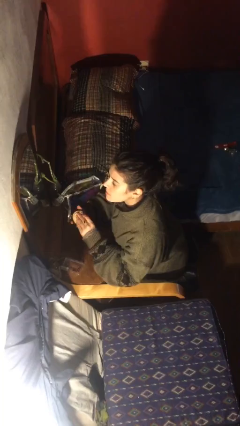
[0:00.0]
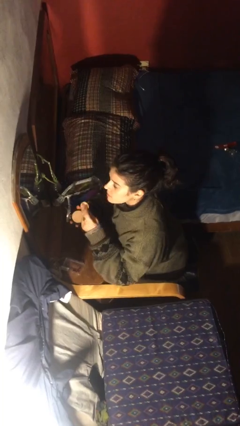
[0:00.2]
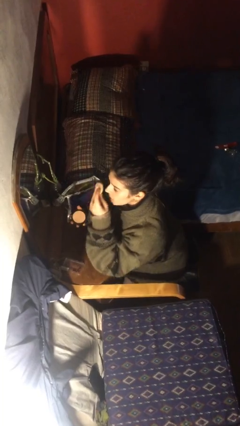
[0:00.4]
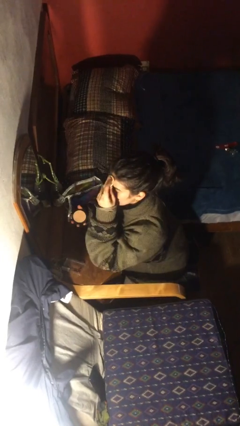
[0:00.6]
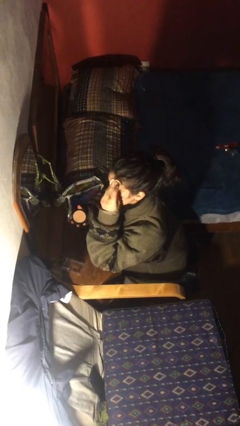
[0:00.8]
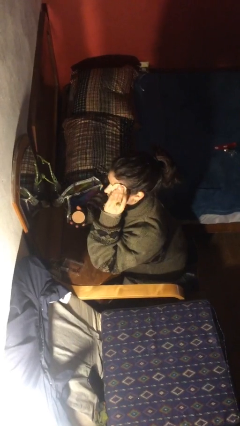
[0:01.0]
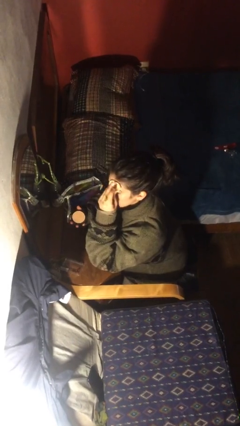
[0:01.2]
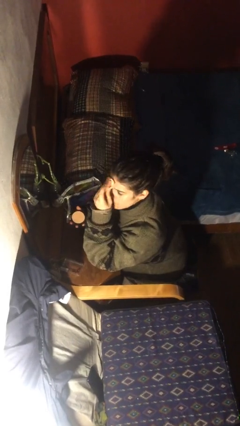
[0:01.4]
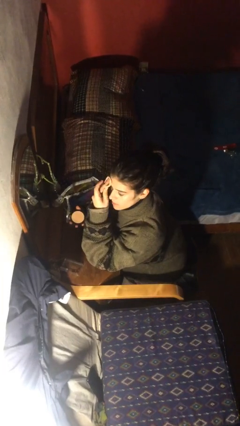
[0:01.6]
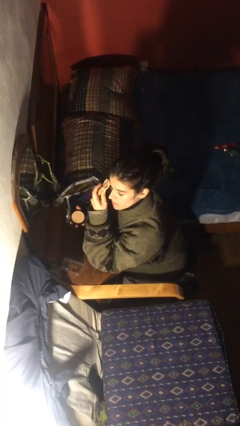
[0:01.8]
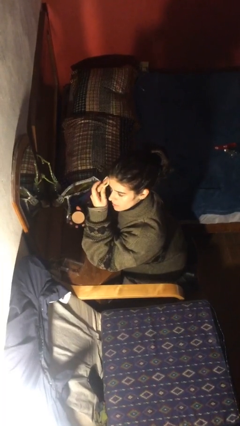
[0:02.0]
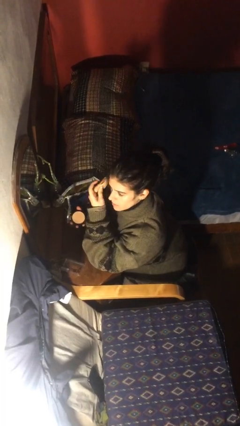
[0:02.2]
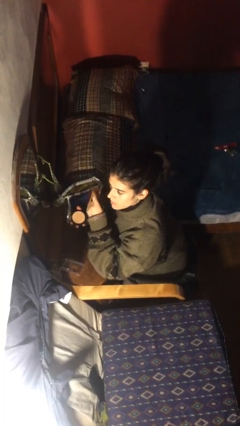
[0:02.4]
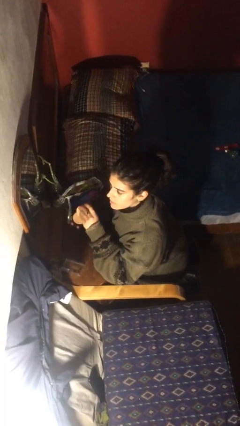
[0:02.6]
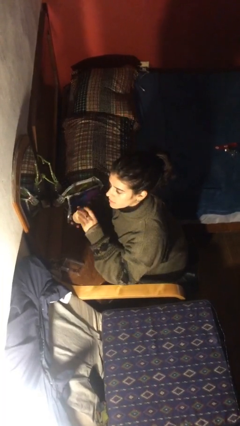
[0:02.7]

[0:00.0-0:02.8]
person applies foundation makeup

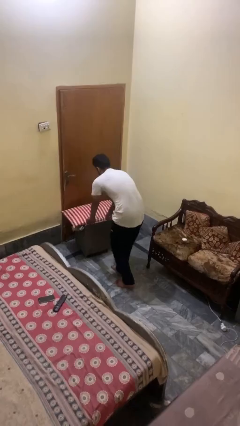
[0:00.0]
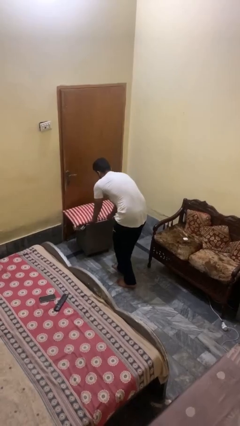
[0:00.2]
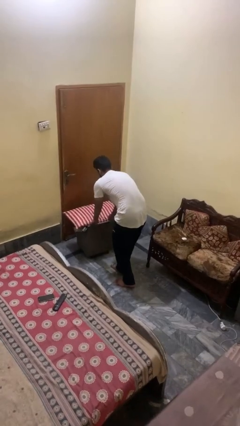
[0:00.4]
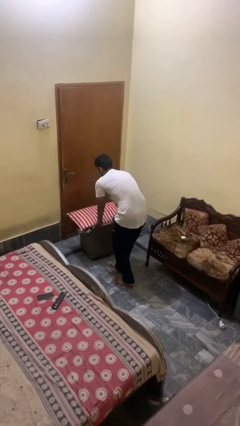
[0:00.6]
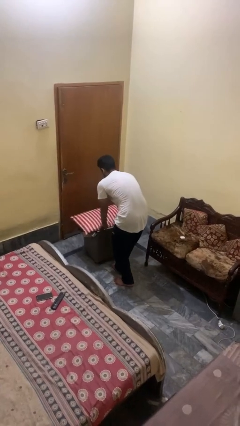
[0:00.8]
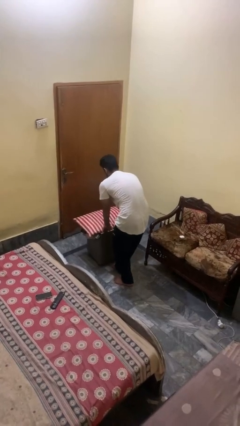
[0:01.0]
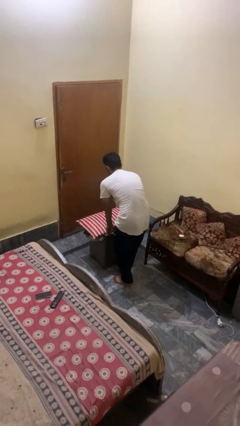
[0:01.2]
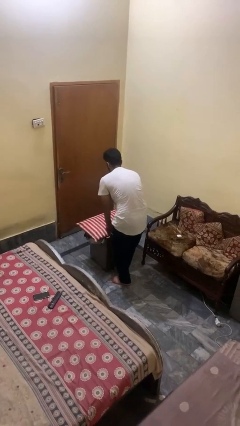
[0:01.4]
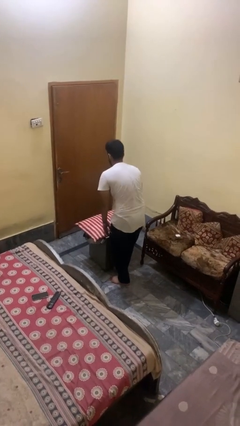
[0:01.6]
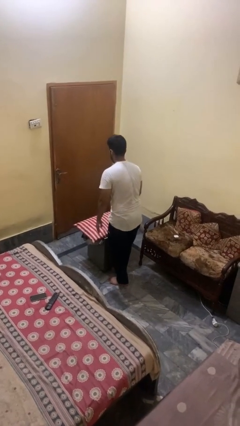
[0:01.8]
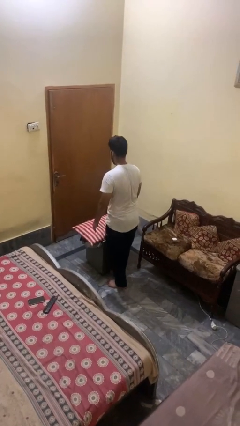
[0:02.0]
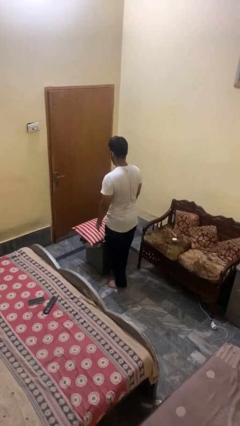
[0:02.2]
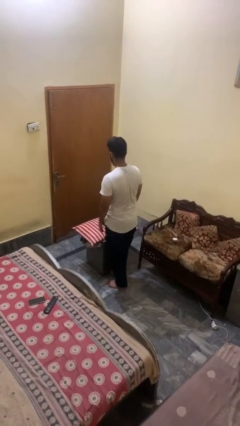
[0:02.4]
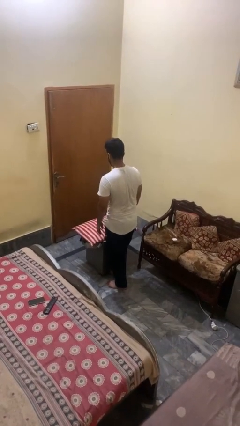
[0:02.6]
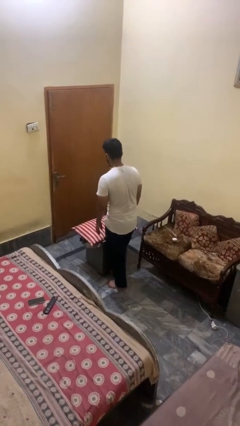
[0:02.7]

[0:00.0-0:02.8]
person pulls wheeled cart

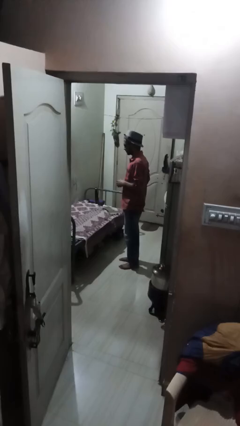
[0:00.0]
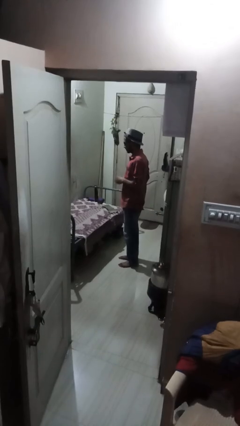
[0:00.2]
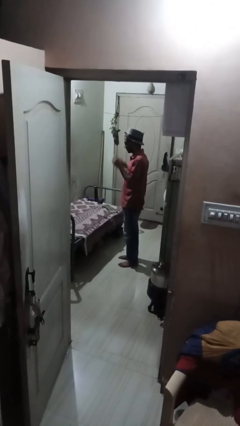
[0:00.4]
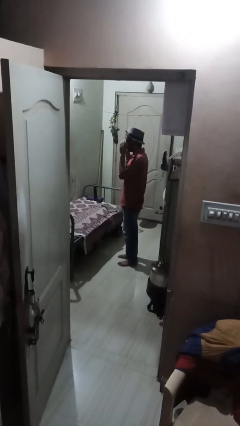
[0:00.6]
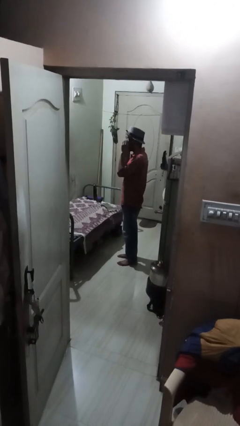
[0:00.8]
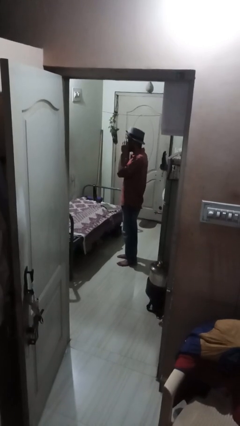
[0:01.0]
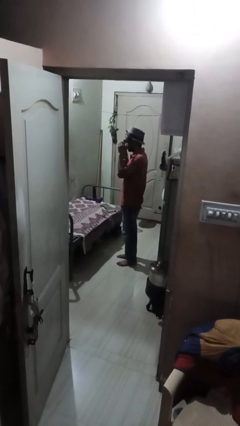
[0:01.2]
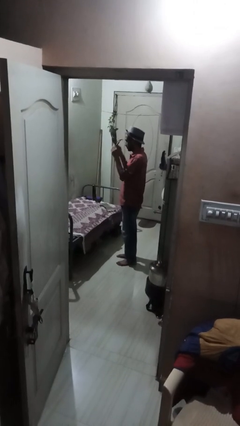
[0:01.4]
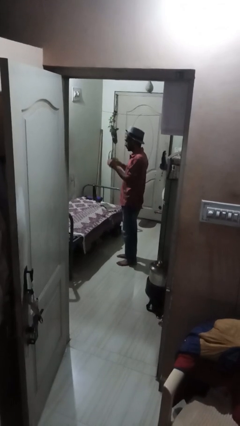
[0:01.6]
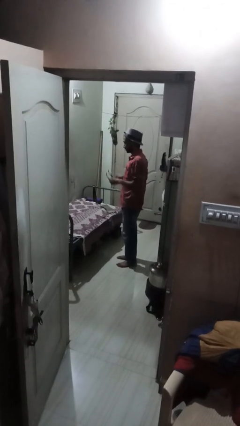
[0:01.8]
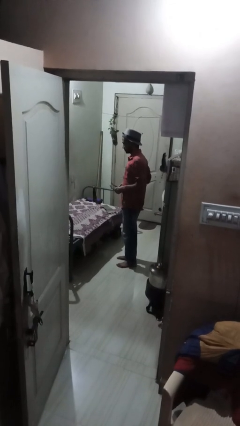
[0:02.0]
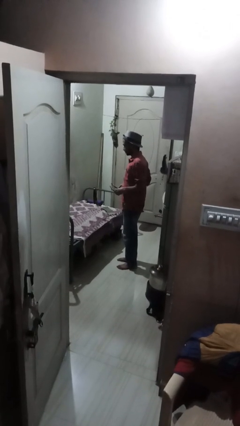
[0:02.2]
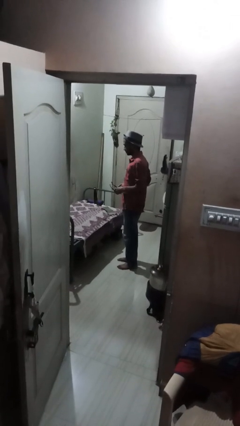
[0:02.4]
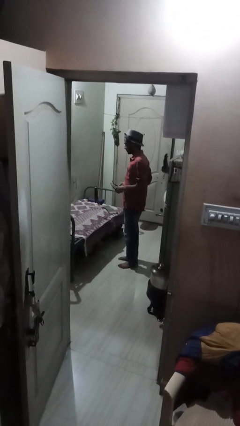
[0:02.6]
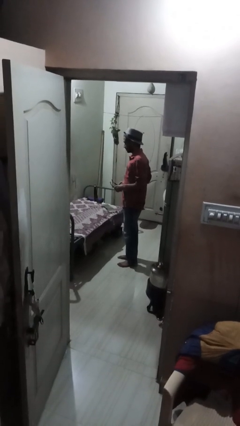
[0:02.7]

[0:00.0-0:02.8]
person takes off glasses

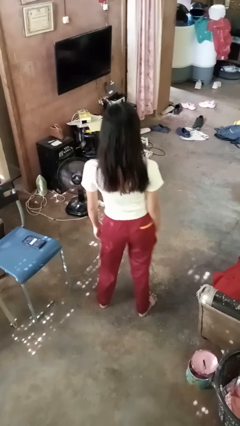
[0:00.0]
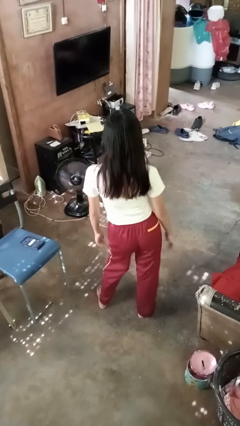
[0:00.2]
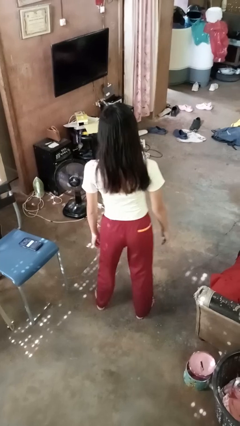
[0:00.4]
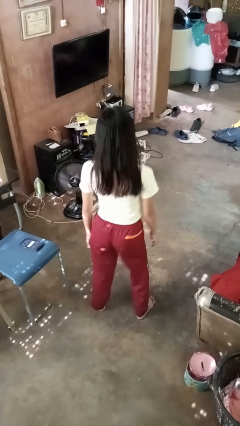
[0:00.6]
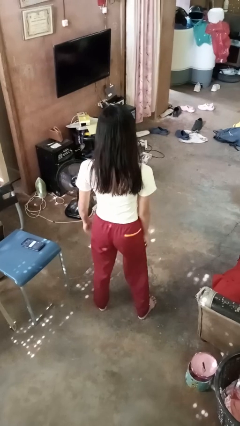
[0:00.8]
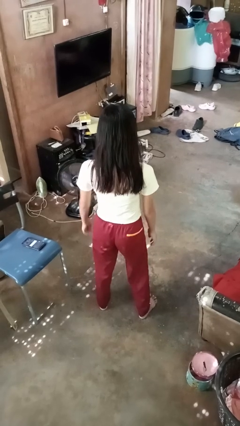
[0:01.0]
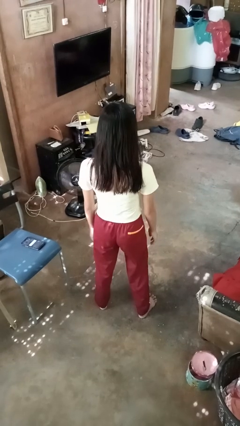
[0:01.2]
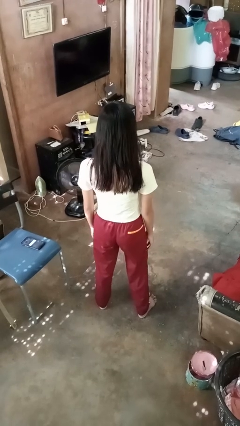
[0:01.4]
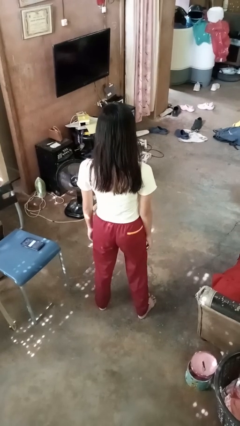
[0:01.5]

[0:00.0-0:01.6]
person wiggles hips

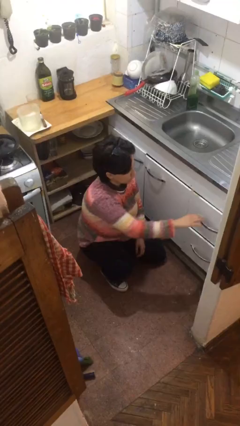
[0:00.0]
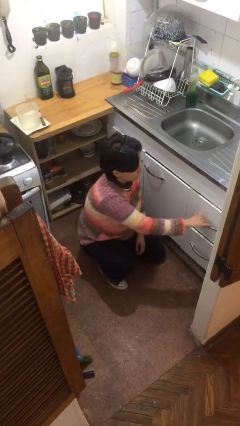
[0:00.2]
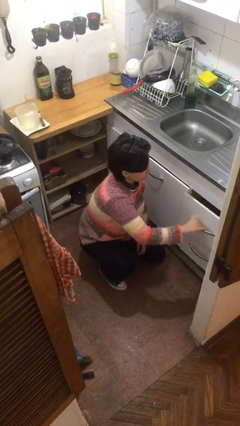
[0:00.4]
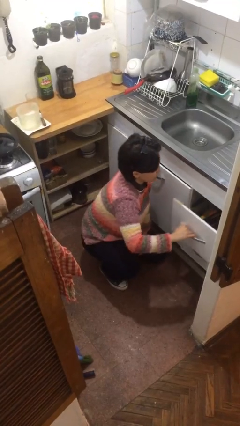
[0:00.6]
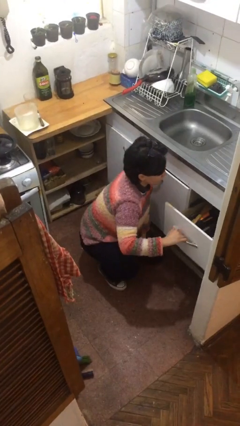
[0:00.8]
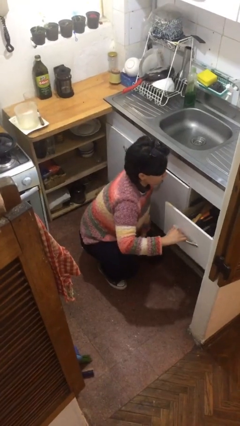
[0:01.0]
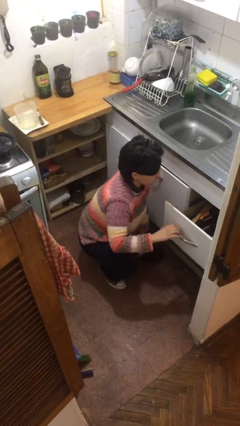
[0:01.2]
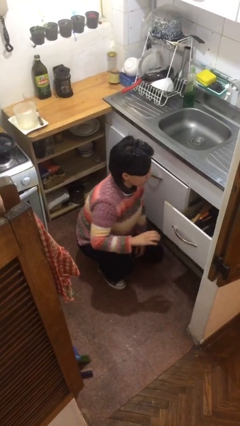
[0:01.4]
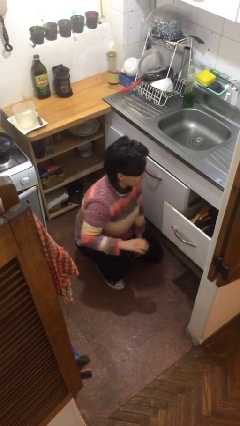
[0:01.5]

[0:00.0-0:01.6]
person opens kitchen drawer

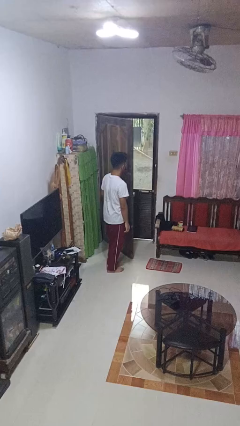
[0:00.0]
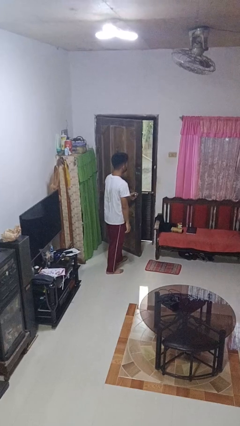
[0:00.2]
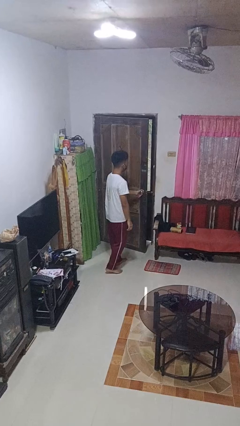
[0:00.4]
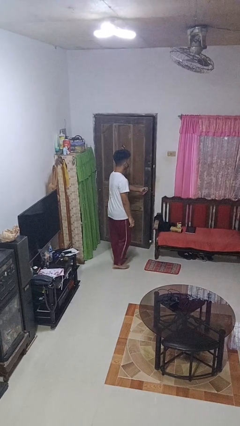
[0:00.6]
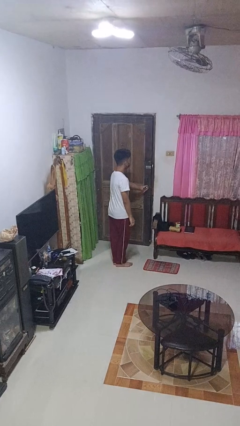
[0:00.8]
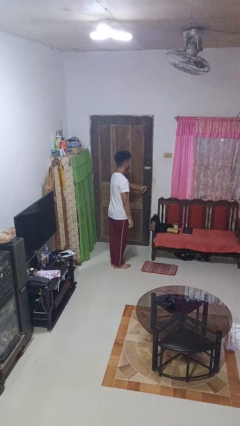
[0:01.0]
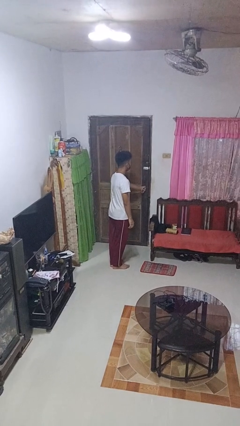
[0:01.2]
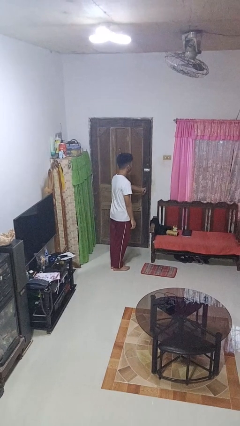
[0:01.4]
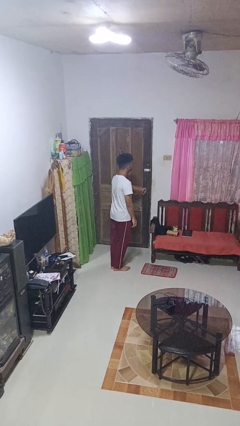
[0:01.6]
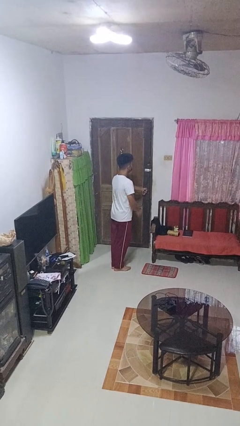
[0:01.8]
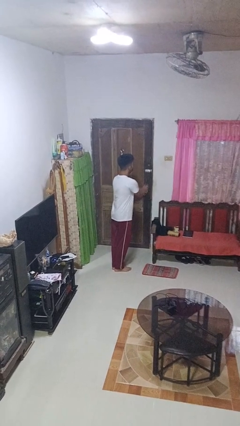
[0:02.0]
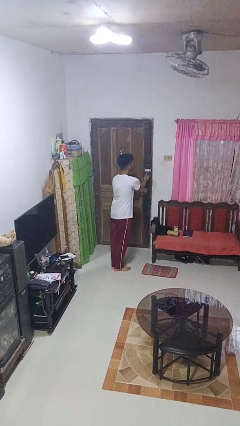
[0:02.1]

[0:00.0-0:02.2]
person closes facility door

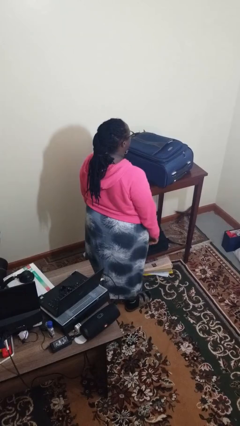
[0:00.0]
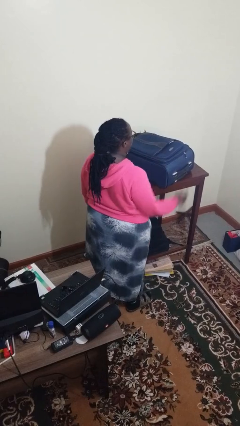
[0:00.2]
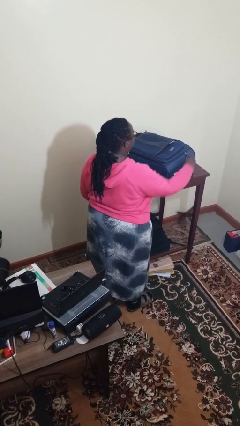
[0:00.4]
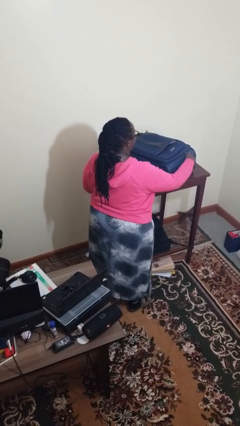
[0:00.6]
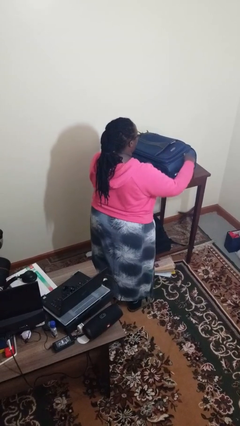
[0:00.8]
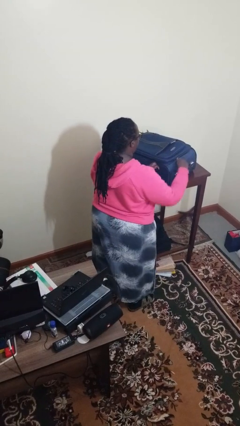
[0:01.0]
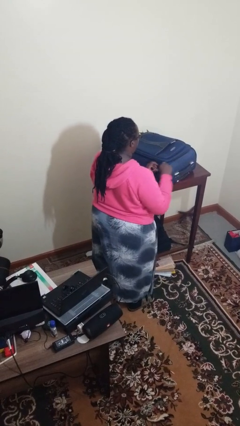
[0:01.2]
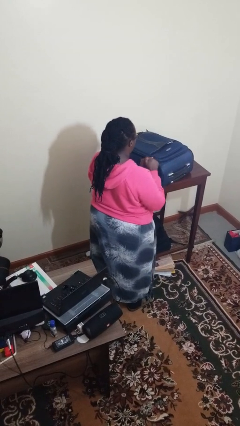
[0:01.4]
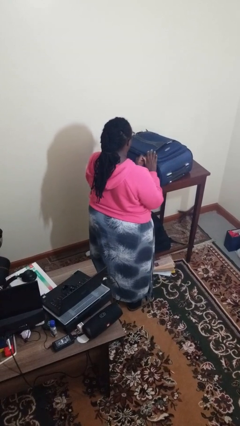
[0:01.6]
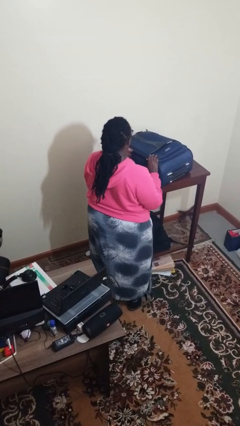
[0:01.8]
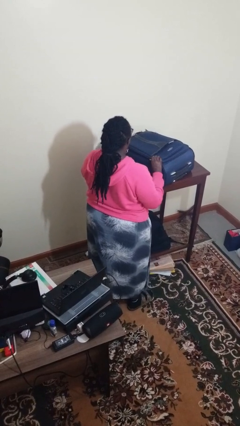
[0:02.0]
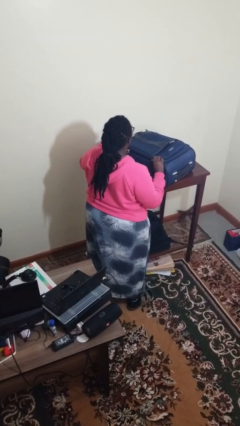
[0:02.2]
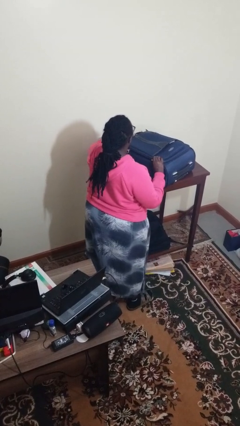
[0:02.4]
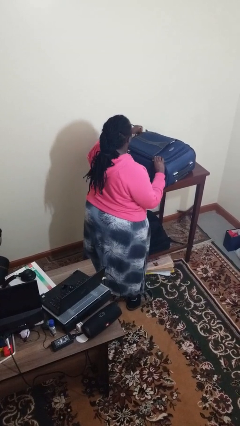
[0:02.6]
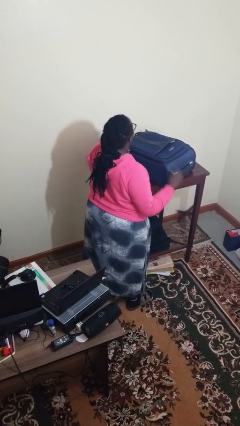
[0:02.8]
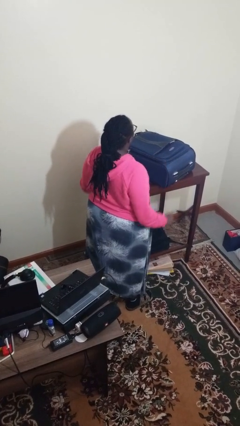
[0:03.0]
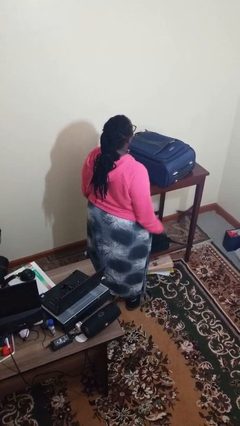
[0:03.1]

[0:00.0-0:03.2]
person closes suitcase
